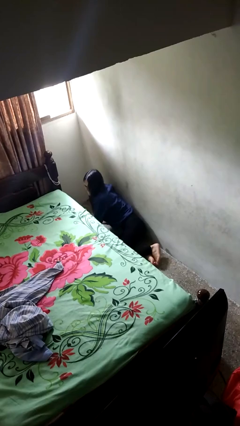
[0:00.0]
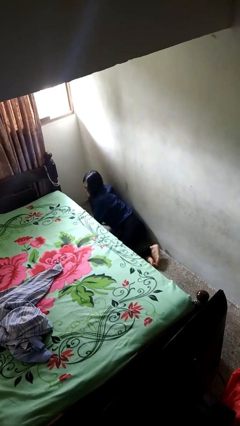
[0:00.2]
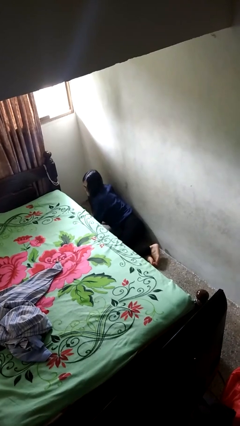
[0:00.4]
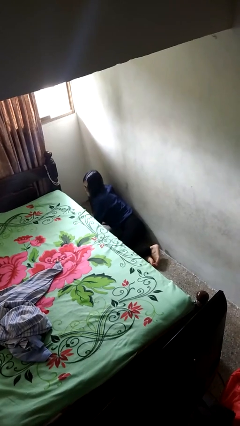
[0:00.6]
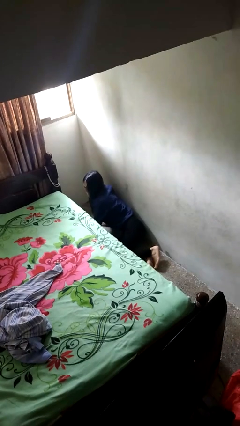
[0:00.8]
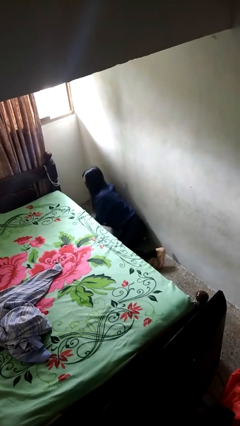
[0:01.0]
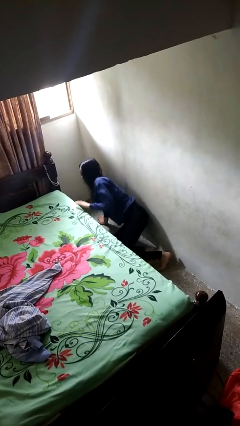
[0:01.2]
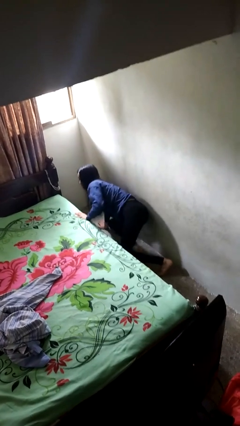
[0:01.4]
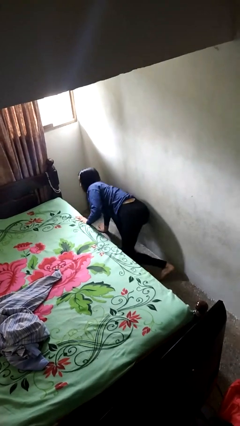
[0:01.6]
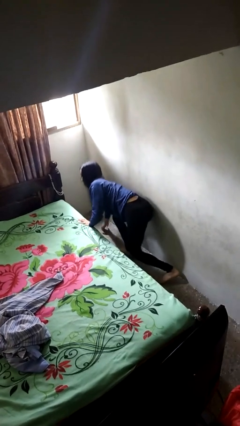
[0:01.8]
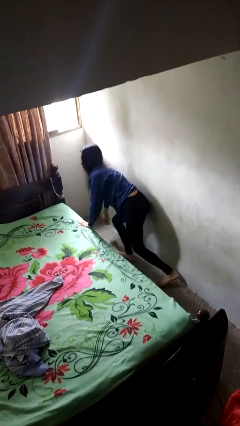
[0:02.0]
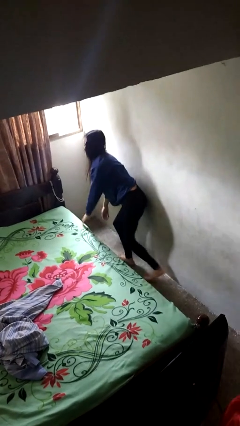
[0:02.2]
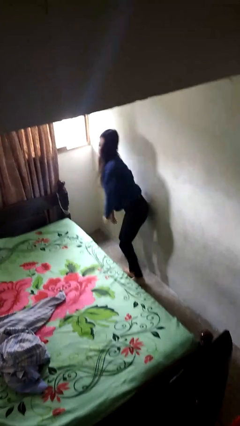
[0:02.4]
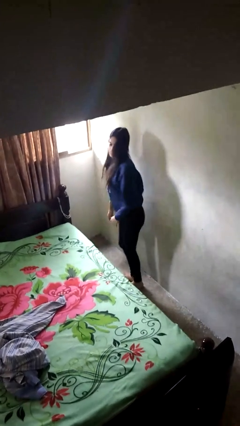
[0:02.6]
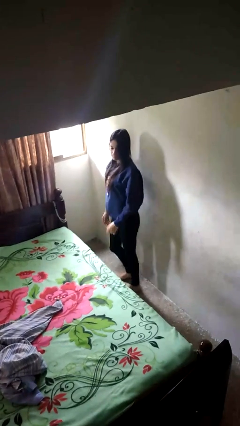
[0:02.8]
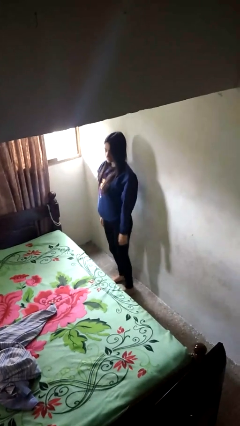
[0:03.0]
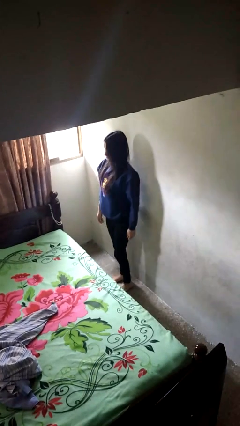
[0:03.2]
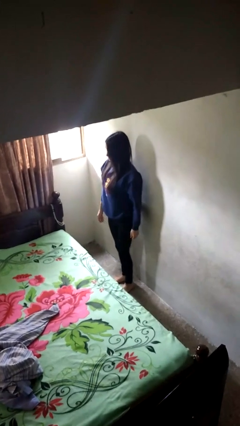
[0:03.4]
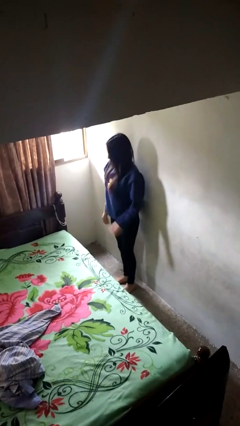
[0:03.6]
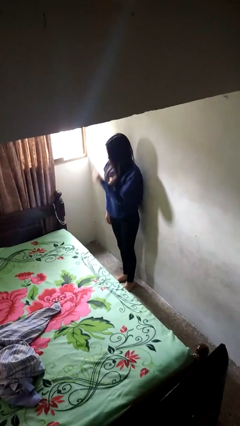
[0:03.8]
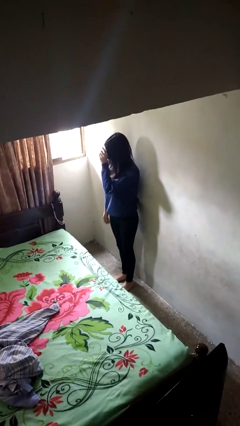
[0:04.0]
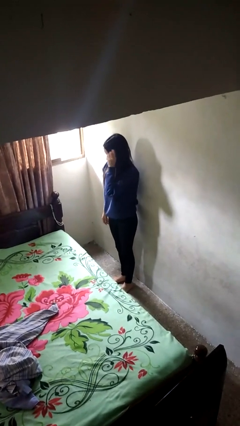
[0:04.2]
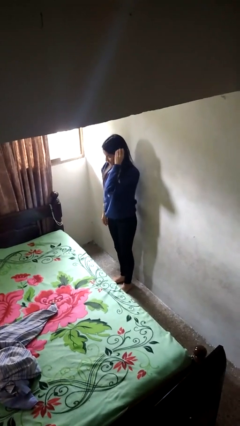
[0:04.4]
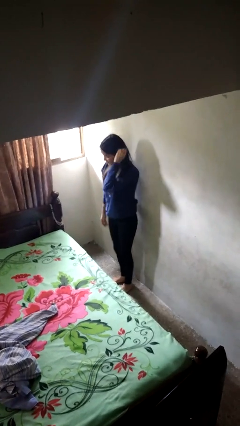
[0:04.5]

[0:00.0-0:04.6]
person stands up from floor

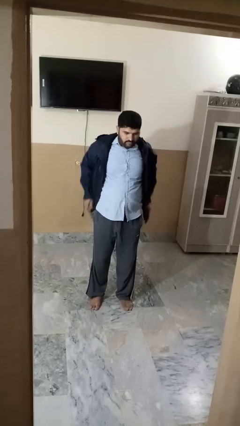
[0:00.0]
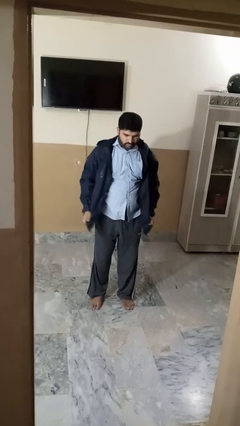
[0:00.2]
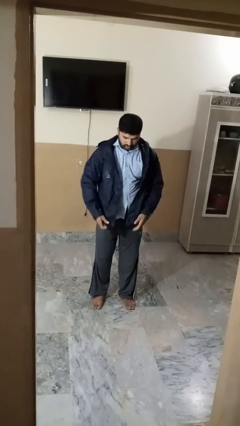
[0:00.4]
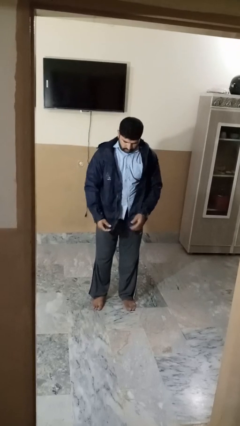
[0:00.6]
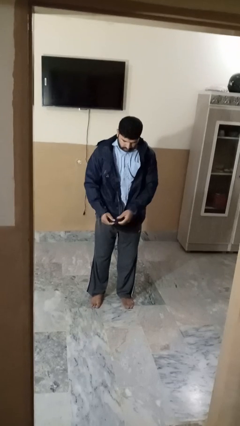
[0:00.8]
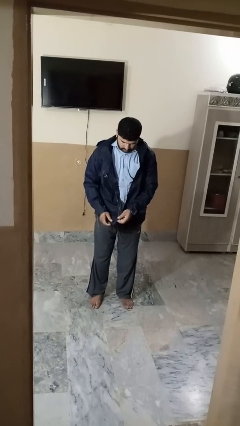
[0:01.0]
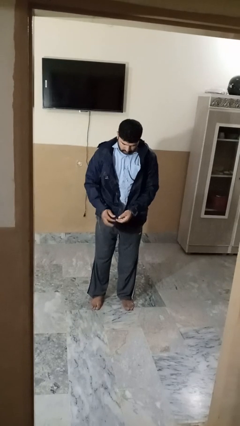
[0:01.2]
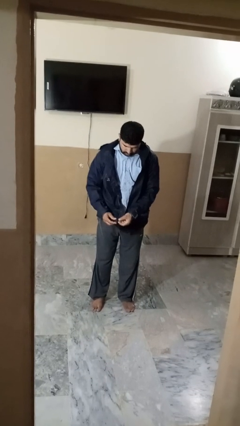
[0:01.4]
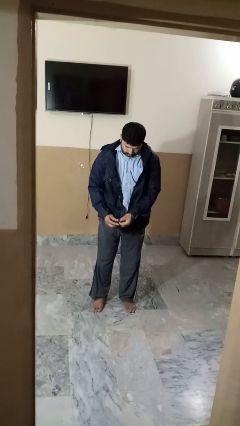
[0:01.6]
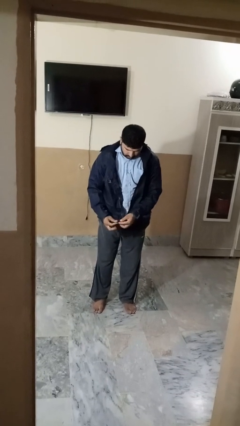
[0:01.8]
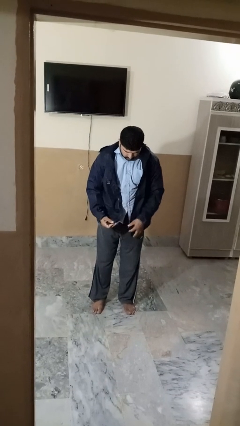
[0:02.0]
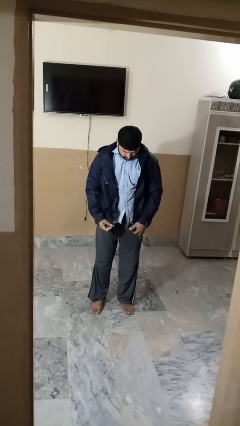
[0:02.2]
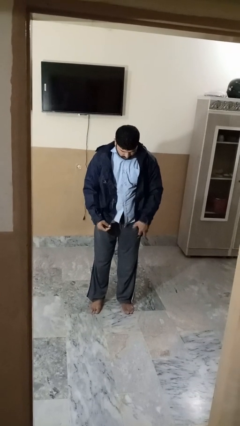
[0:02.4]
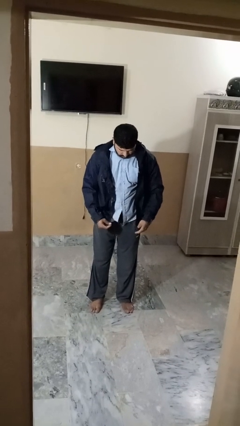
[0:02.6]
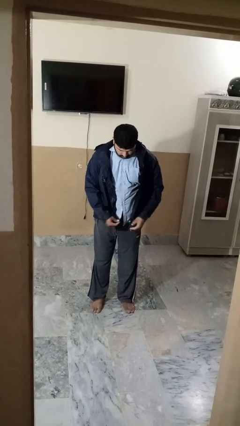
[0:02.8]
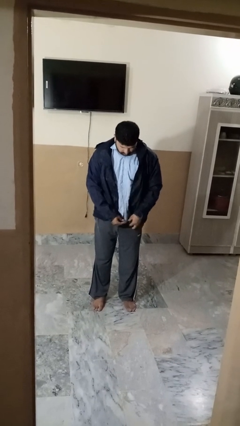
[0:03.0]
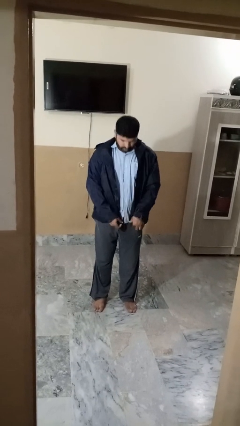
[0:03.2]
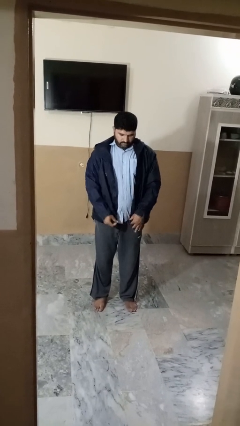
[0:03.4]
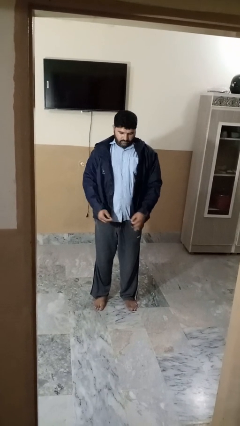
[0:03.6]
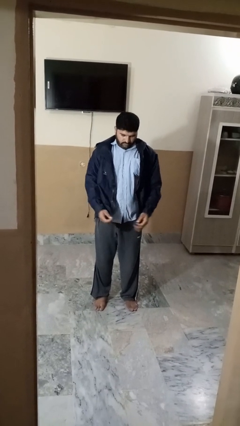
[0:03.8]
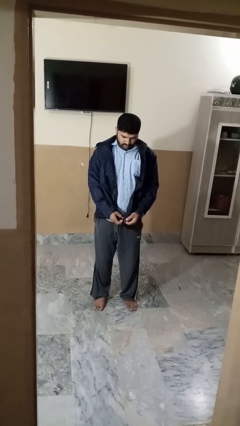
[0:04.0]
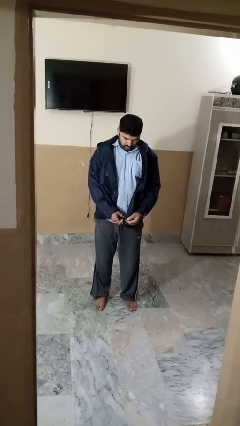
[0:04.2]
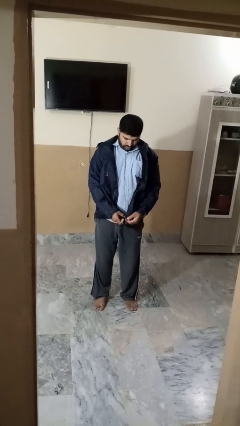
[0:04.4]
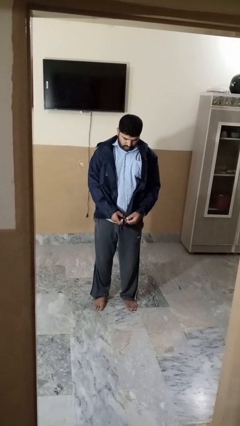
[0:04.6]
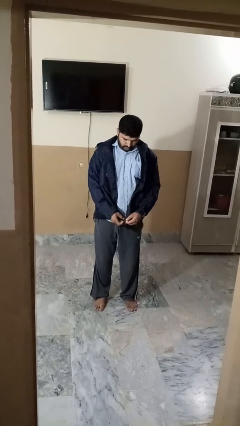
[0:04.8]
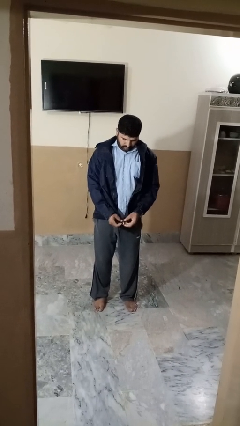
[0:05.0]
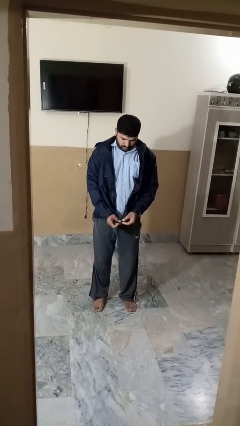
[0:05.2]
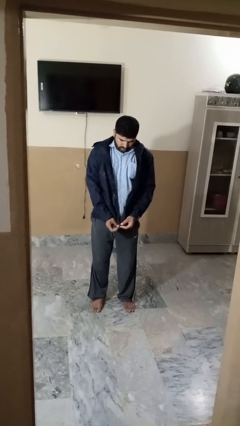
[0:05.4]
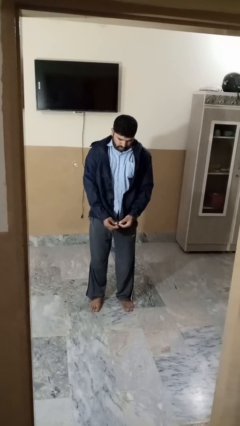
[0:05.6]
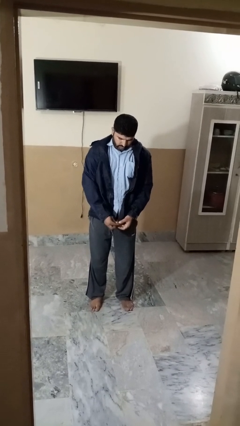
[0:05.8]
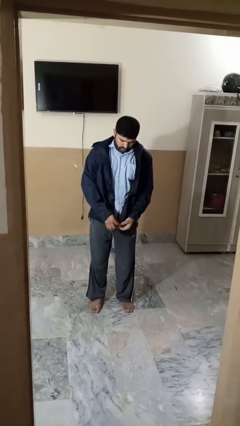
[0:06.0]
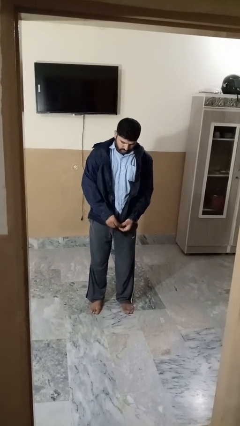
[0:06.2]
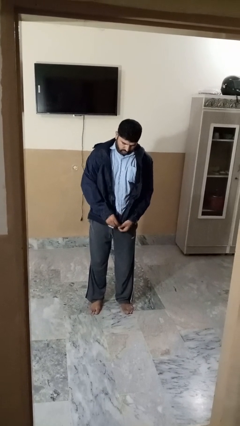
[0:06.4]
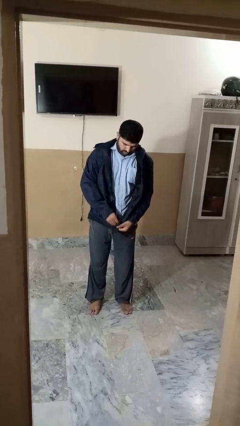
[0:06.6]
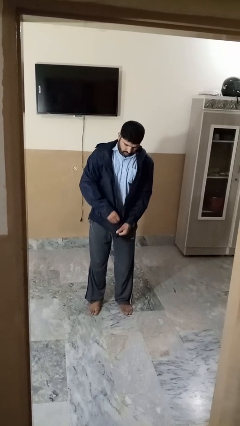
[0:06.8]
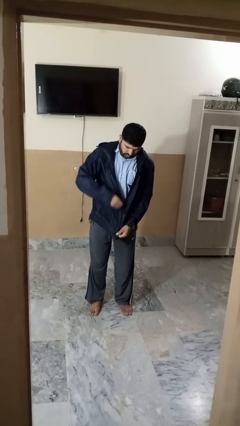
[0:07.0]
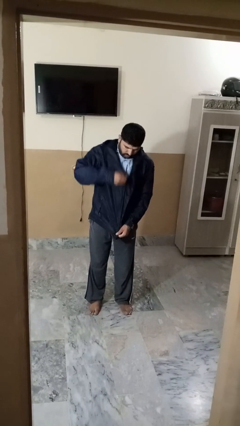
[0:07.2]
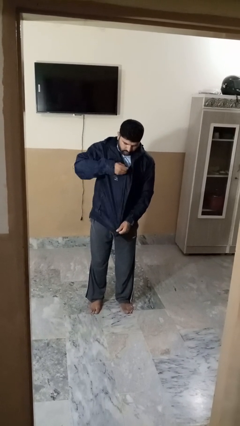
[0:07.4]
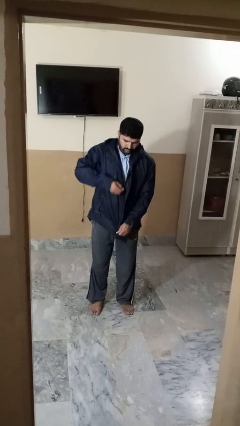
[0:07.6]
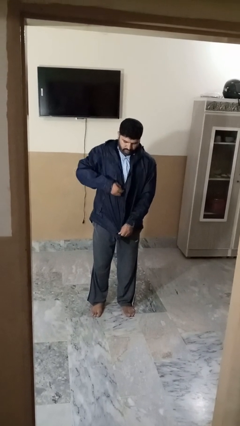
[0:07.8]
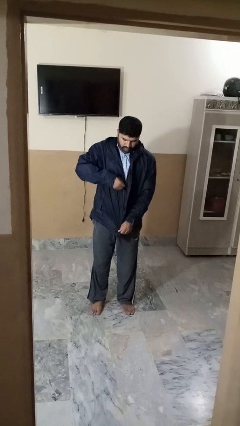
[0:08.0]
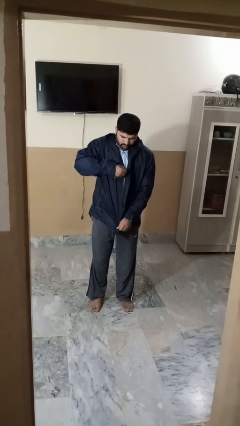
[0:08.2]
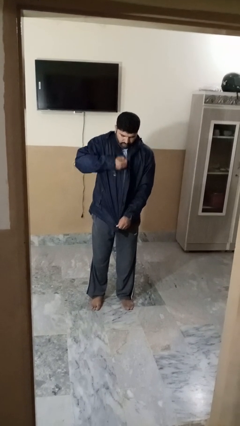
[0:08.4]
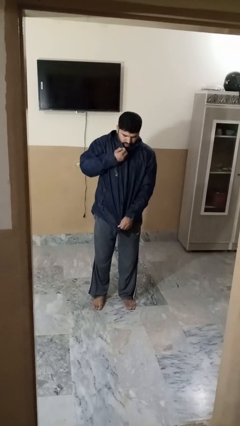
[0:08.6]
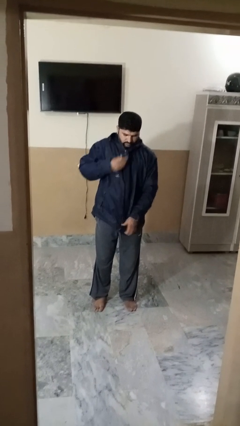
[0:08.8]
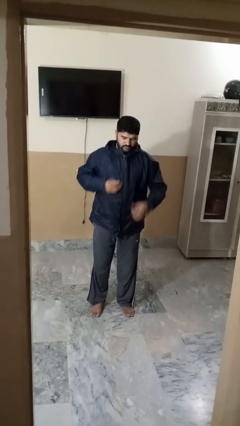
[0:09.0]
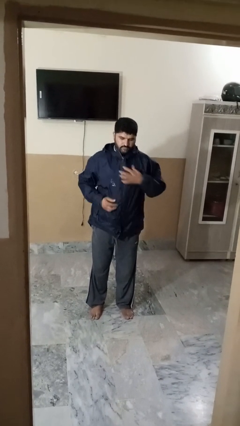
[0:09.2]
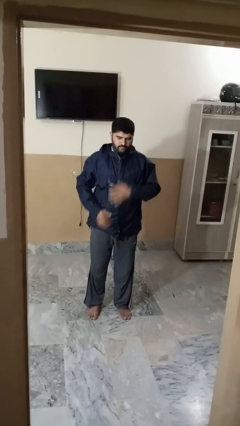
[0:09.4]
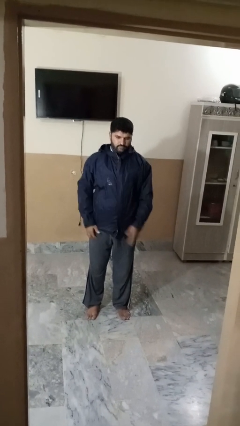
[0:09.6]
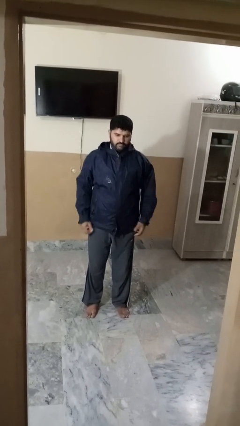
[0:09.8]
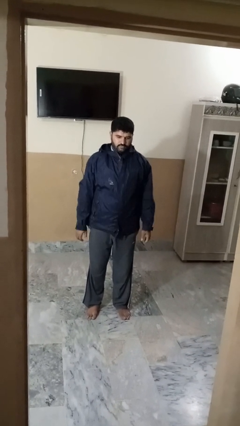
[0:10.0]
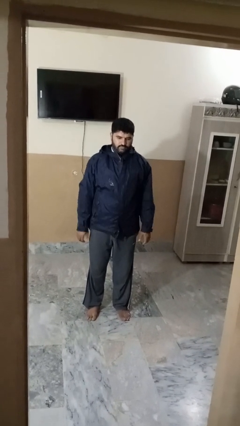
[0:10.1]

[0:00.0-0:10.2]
person zips up jacket

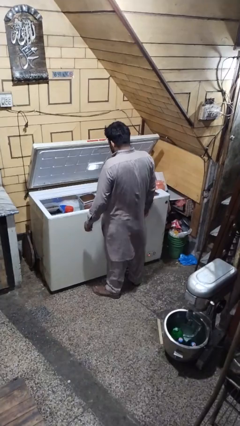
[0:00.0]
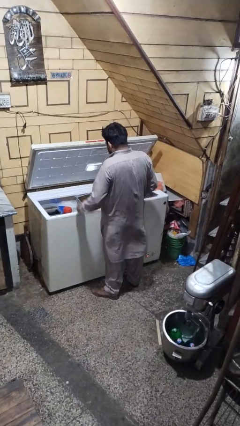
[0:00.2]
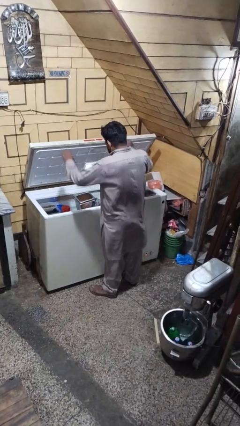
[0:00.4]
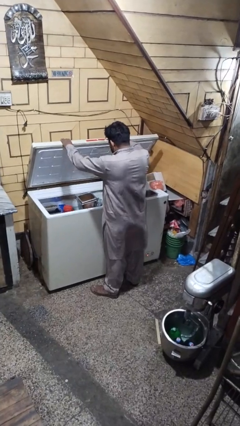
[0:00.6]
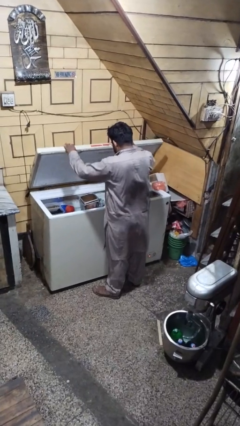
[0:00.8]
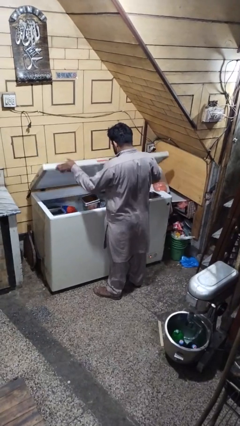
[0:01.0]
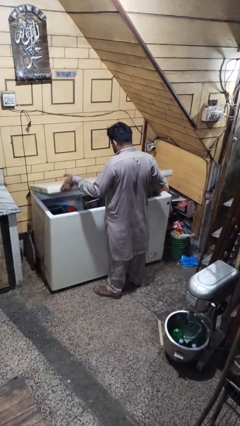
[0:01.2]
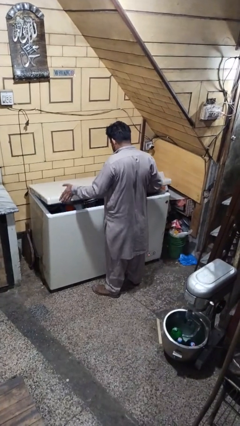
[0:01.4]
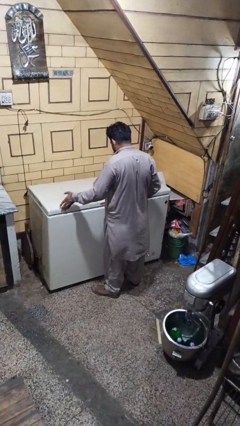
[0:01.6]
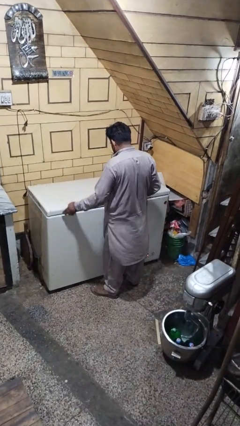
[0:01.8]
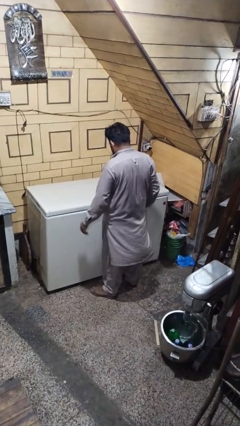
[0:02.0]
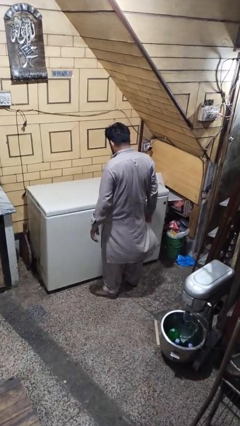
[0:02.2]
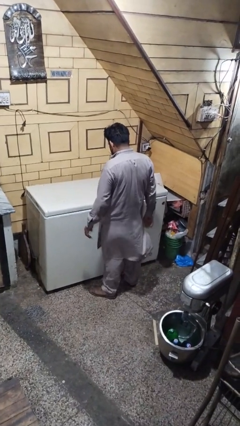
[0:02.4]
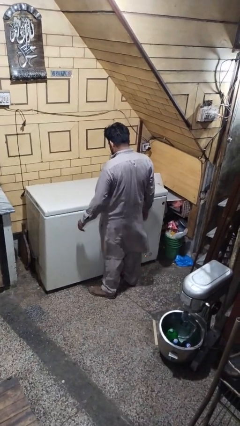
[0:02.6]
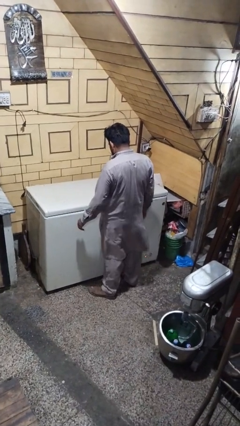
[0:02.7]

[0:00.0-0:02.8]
person closes refrigerator
